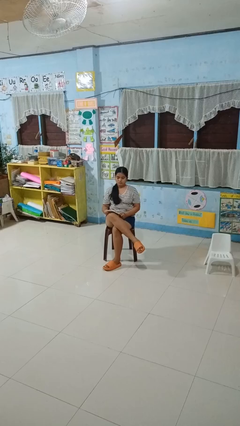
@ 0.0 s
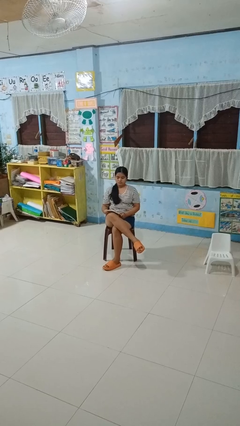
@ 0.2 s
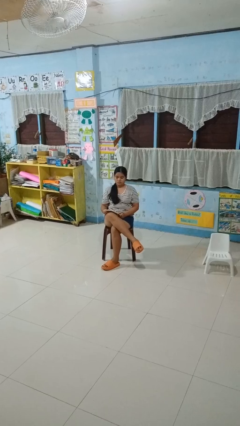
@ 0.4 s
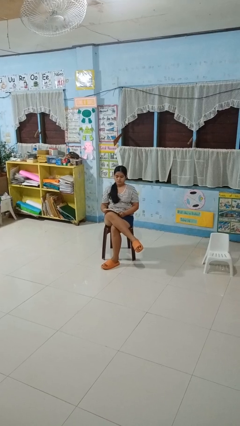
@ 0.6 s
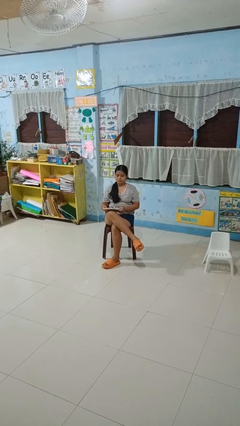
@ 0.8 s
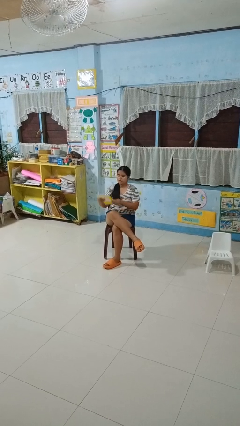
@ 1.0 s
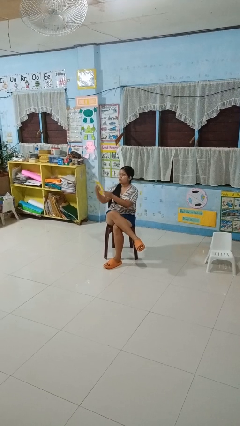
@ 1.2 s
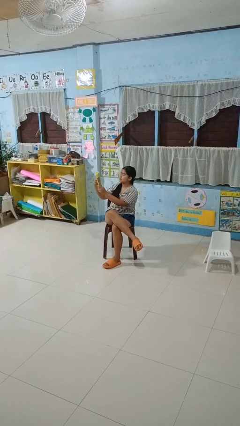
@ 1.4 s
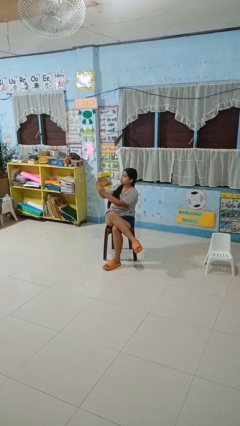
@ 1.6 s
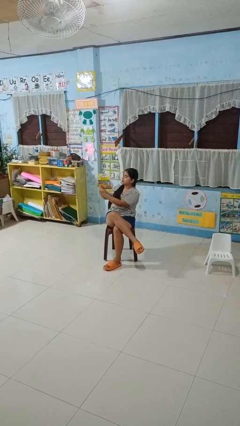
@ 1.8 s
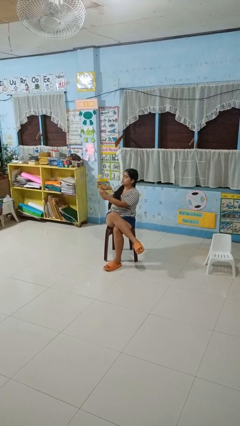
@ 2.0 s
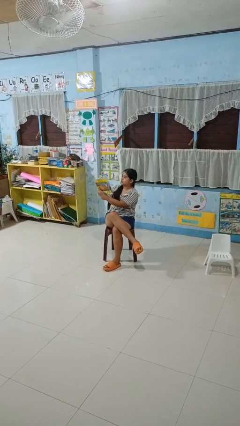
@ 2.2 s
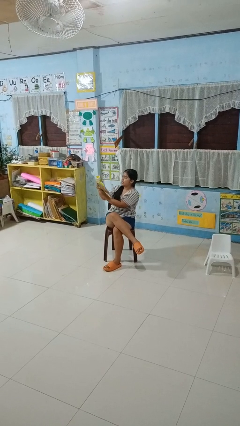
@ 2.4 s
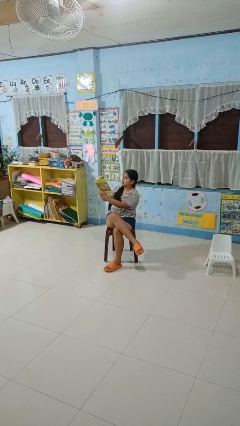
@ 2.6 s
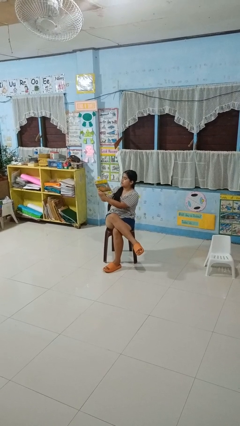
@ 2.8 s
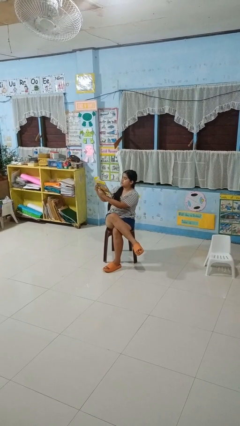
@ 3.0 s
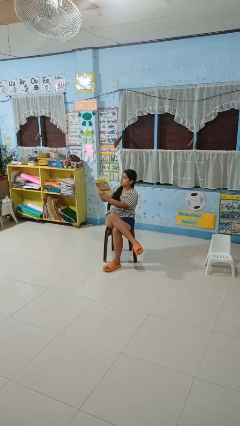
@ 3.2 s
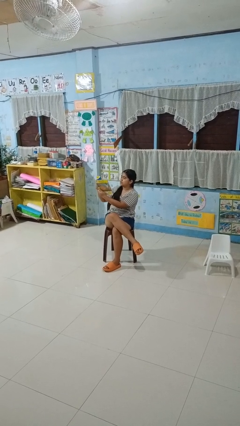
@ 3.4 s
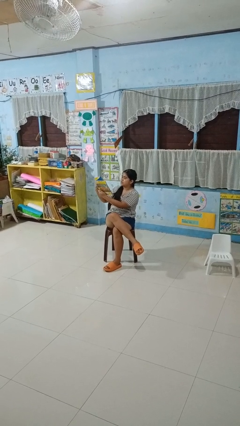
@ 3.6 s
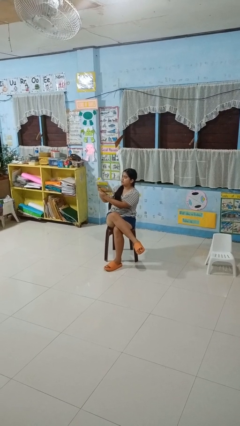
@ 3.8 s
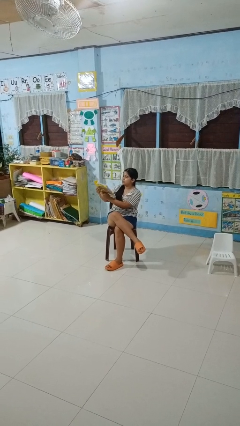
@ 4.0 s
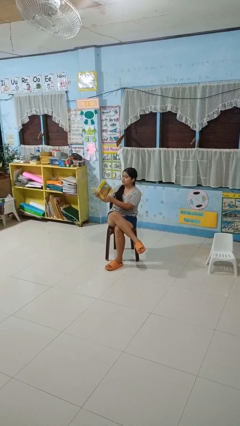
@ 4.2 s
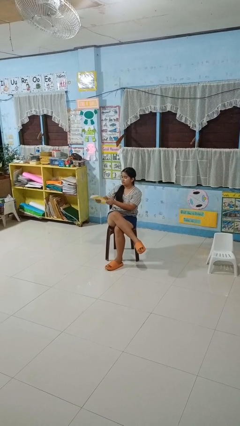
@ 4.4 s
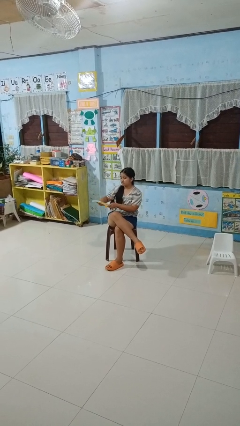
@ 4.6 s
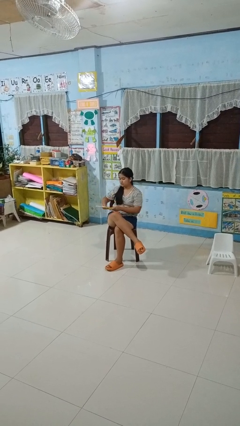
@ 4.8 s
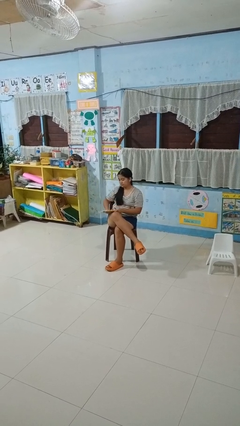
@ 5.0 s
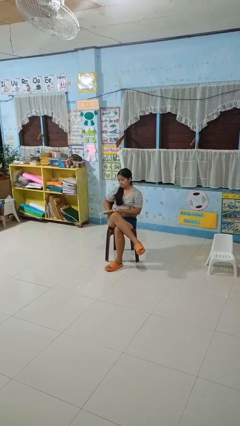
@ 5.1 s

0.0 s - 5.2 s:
person reads book

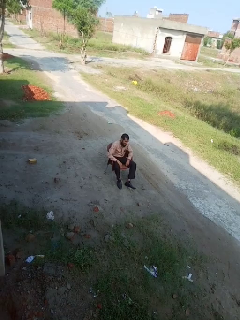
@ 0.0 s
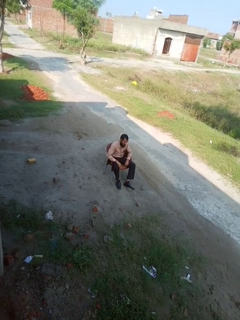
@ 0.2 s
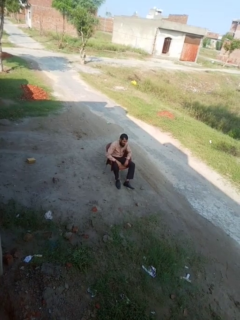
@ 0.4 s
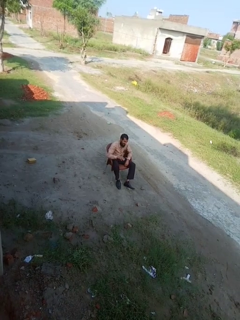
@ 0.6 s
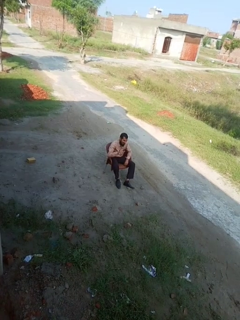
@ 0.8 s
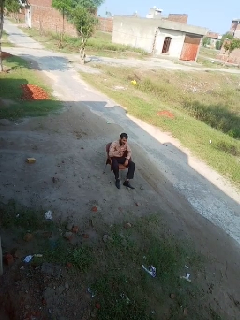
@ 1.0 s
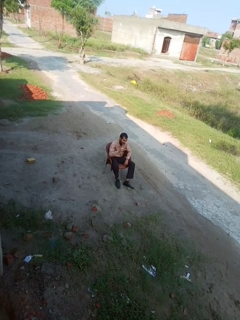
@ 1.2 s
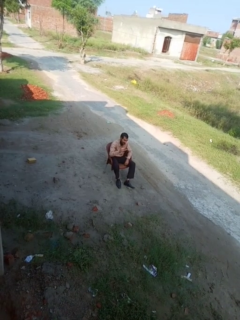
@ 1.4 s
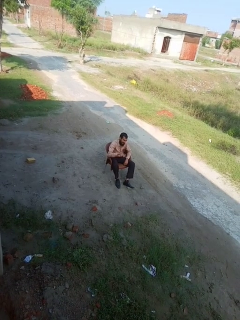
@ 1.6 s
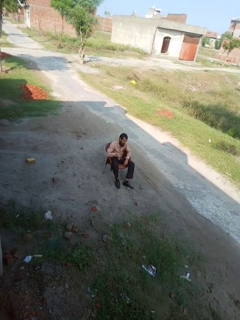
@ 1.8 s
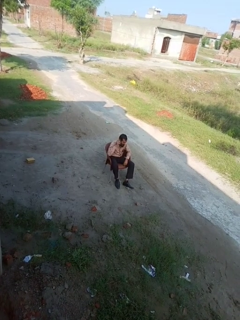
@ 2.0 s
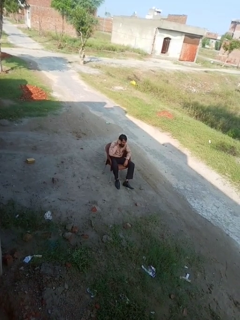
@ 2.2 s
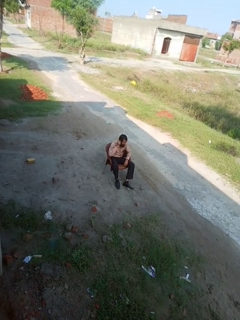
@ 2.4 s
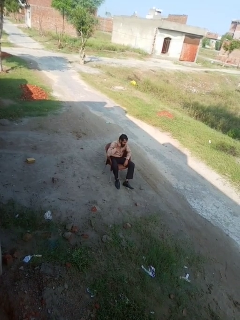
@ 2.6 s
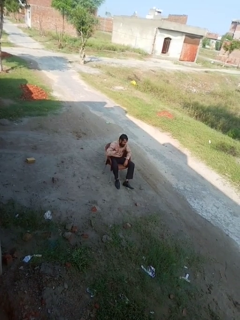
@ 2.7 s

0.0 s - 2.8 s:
person gestures number five

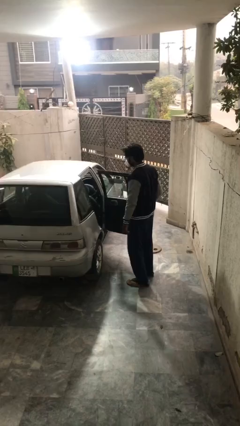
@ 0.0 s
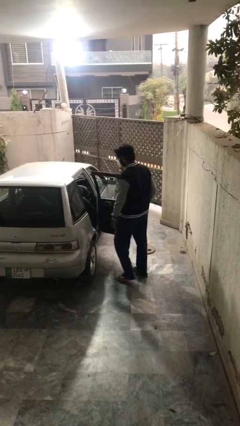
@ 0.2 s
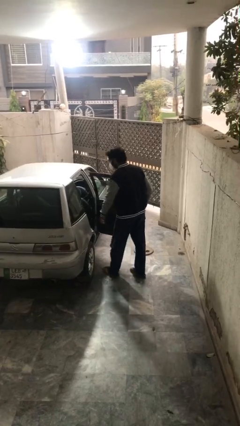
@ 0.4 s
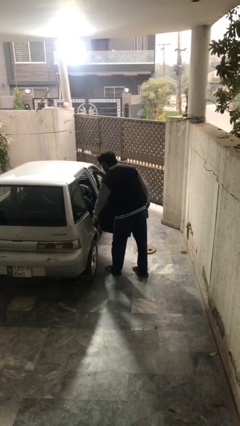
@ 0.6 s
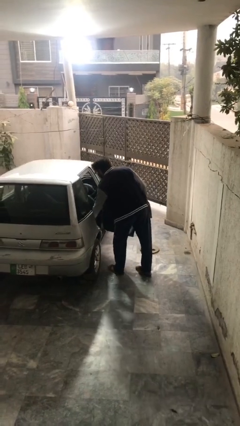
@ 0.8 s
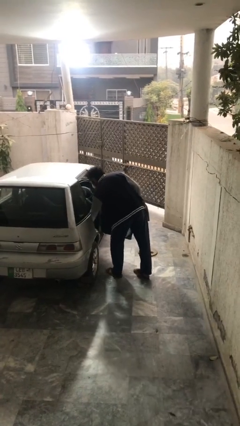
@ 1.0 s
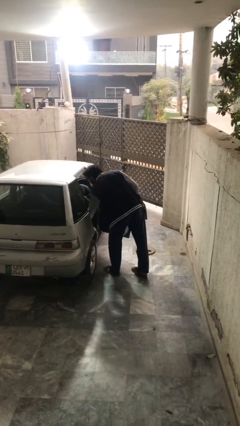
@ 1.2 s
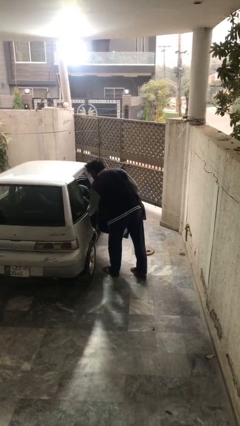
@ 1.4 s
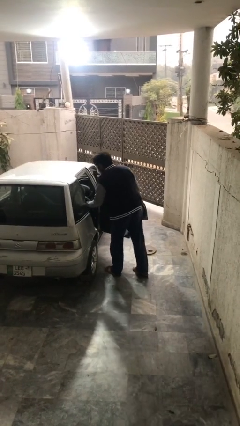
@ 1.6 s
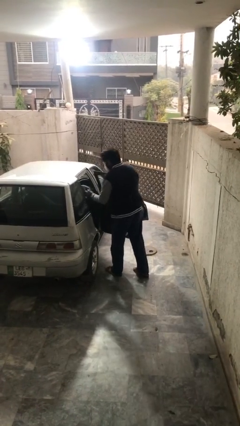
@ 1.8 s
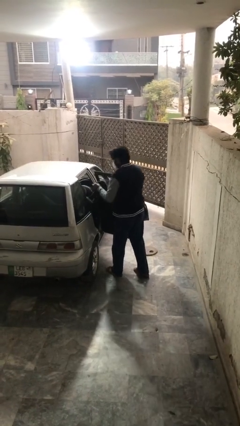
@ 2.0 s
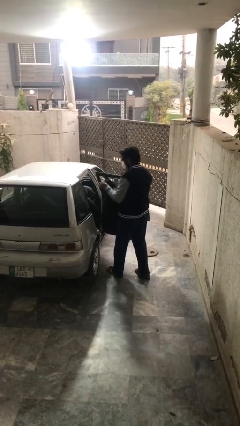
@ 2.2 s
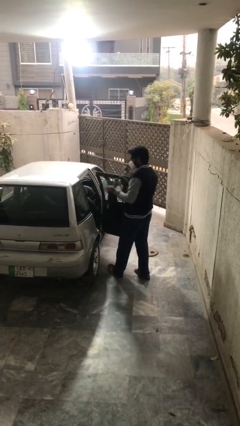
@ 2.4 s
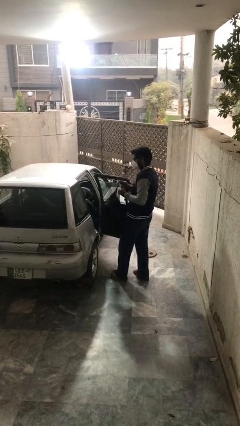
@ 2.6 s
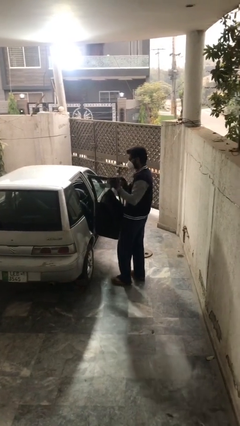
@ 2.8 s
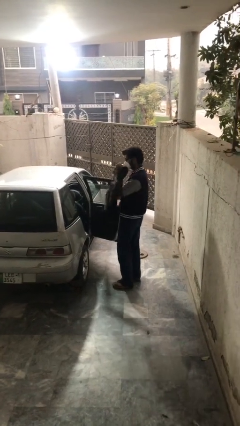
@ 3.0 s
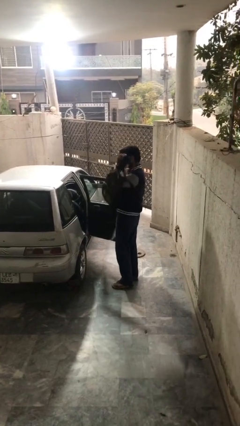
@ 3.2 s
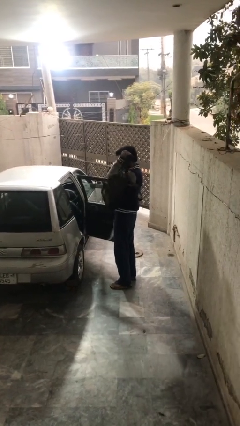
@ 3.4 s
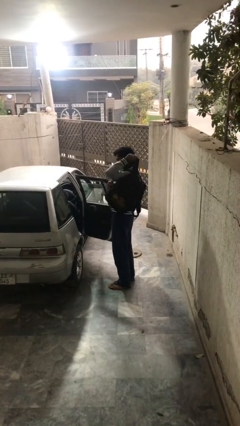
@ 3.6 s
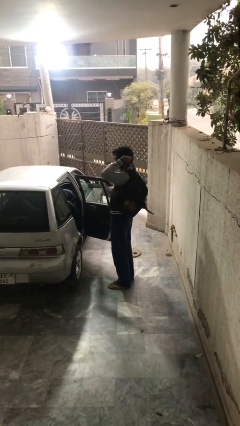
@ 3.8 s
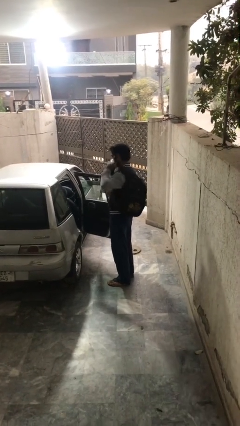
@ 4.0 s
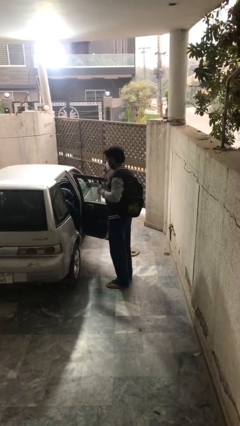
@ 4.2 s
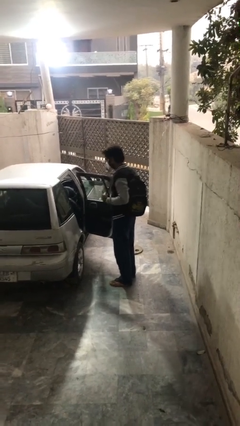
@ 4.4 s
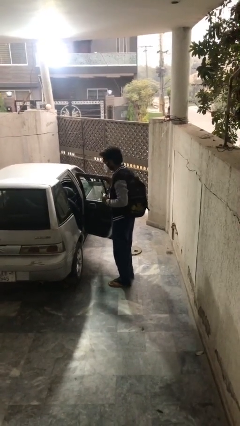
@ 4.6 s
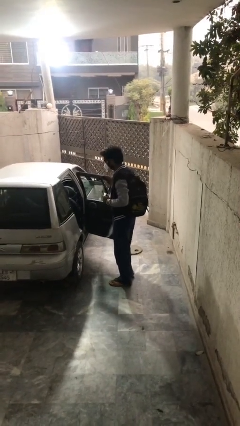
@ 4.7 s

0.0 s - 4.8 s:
person unloads car

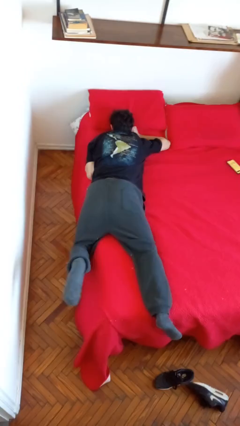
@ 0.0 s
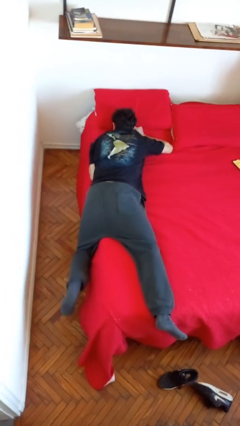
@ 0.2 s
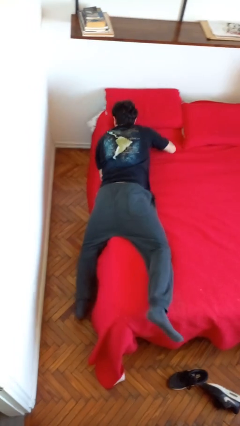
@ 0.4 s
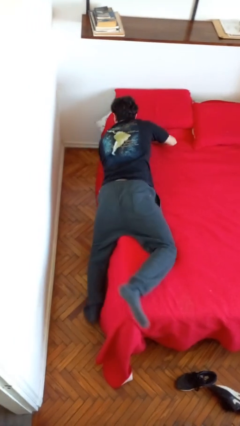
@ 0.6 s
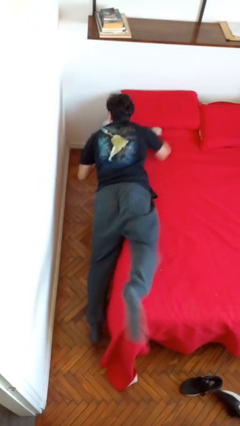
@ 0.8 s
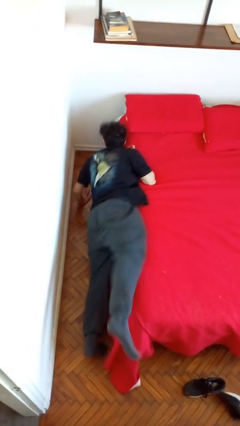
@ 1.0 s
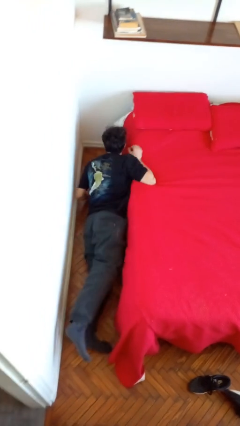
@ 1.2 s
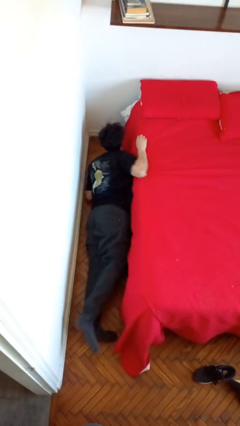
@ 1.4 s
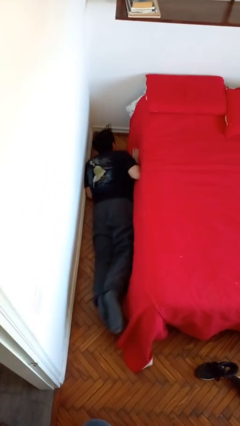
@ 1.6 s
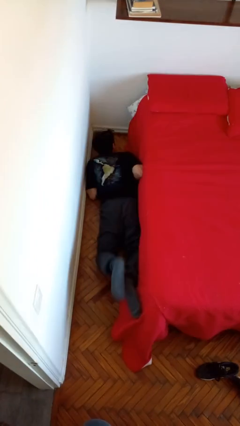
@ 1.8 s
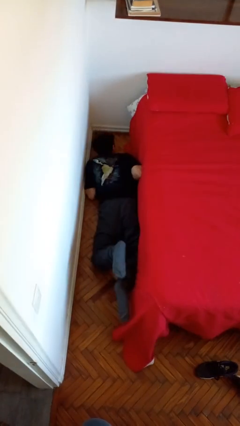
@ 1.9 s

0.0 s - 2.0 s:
person falls from bed

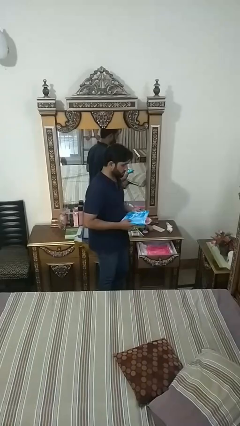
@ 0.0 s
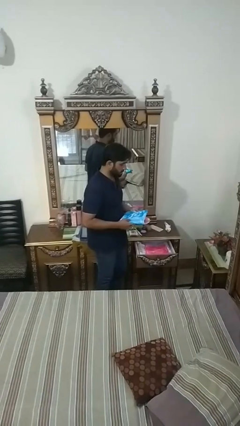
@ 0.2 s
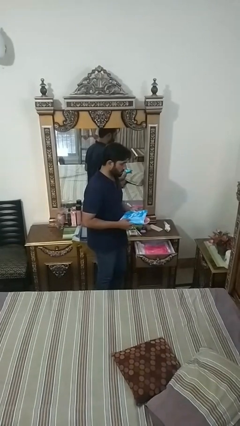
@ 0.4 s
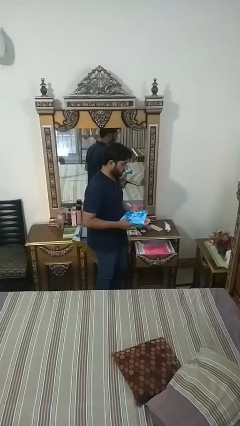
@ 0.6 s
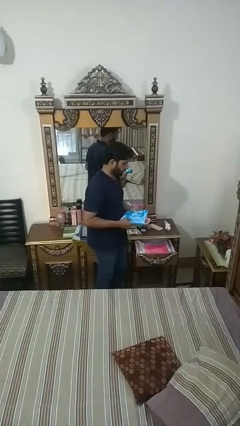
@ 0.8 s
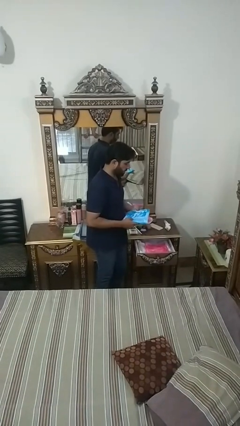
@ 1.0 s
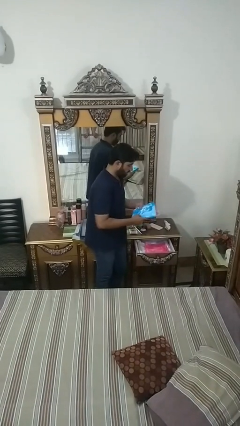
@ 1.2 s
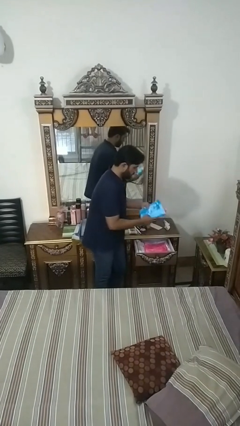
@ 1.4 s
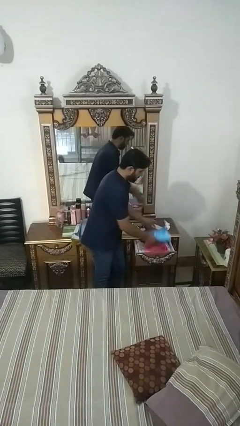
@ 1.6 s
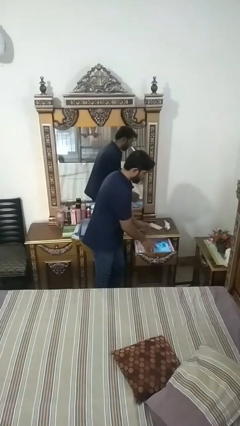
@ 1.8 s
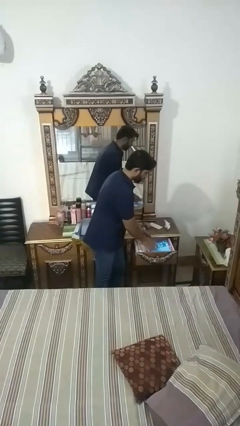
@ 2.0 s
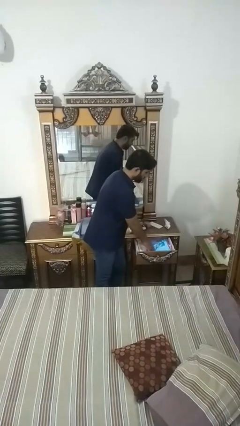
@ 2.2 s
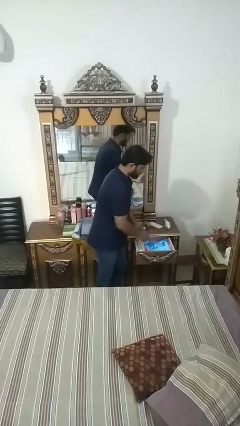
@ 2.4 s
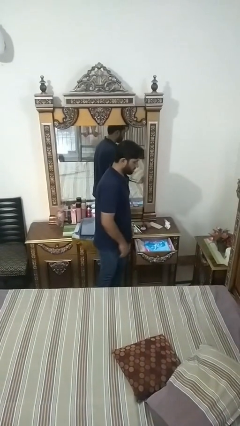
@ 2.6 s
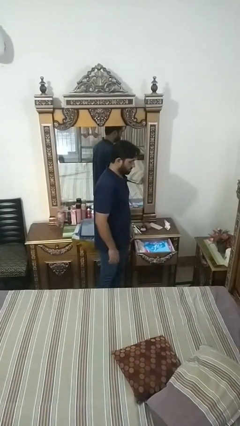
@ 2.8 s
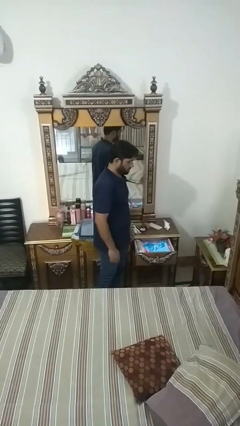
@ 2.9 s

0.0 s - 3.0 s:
person puts clothes into dresser

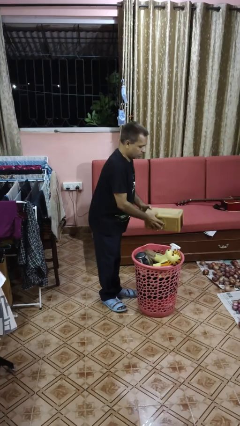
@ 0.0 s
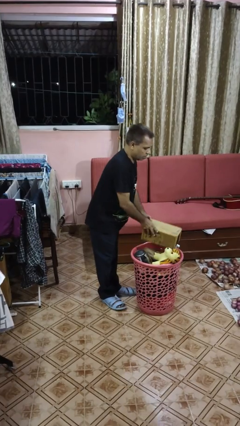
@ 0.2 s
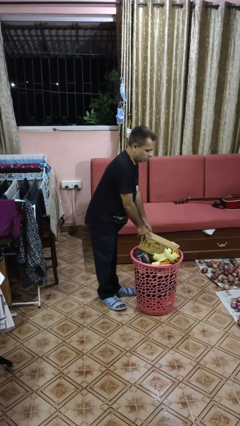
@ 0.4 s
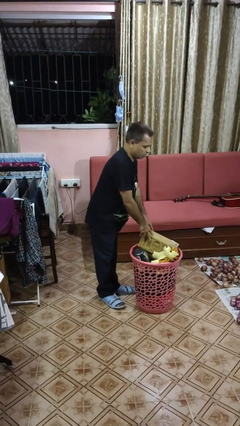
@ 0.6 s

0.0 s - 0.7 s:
person puts object into basket
